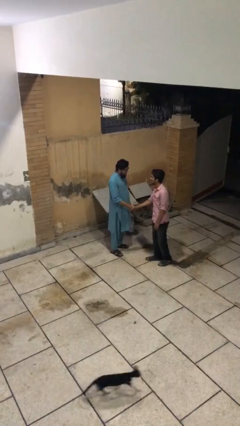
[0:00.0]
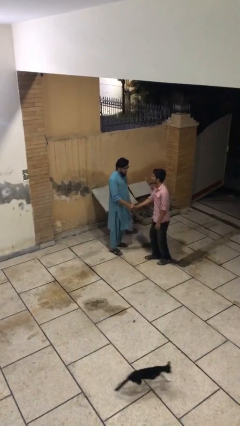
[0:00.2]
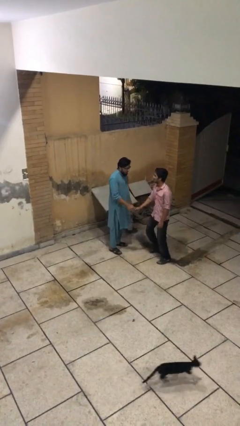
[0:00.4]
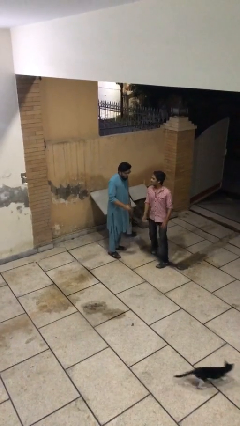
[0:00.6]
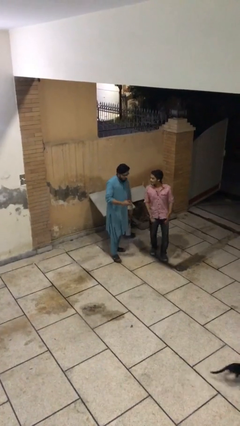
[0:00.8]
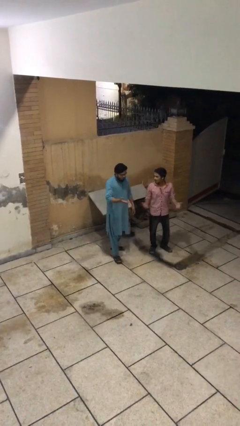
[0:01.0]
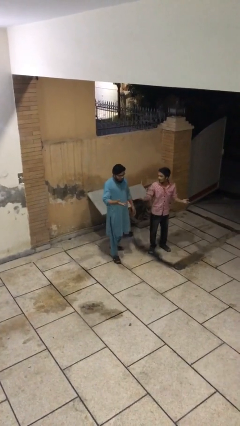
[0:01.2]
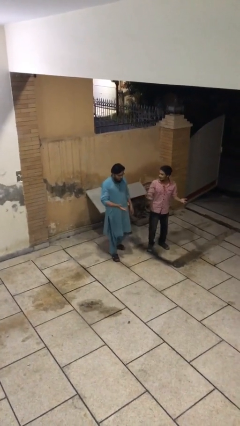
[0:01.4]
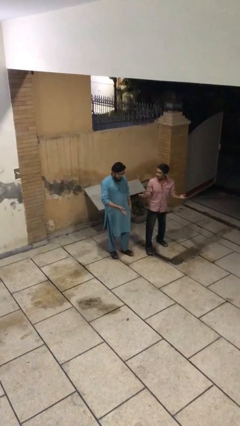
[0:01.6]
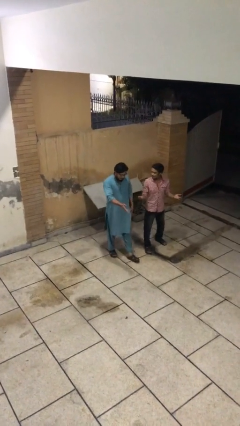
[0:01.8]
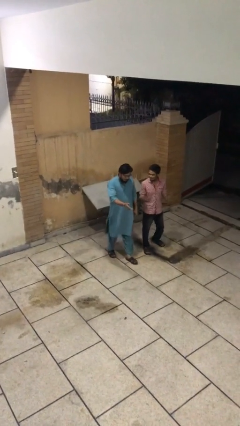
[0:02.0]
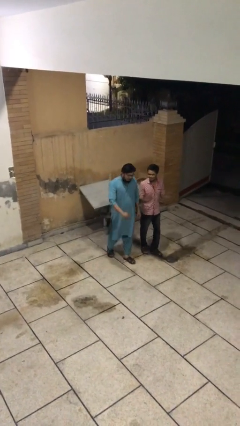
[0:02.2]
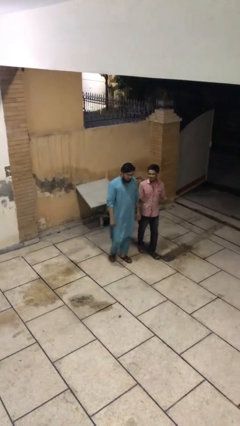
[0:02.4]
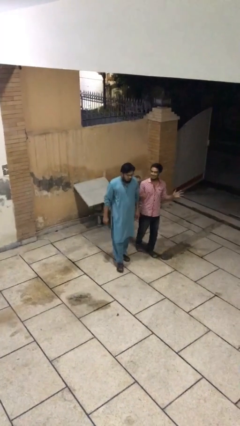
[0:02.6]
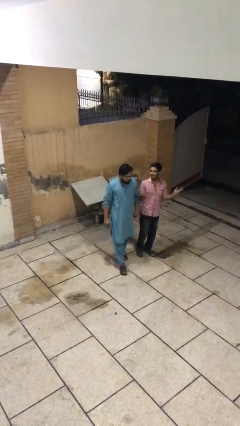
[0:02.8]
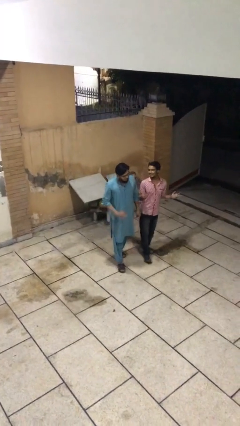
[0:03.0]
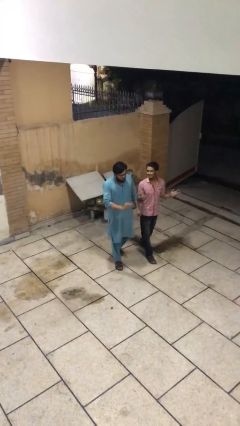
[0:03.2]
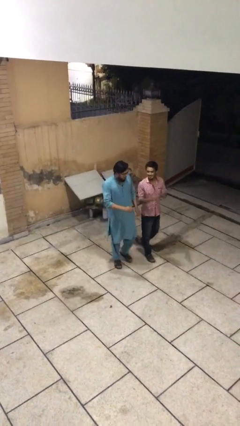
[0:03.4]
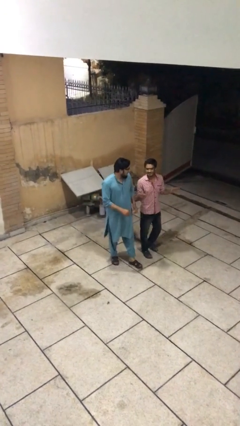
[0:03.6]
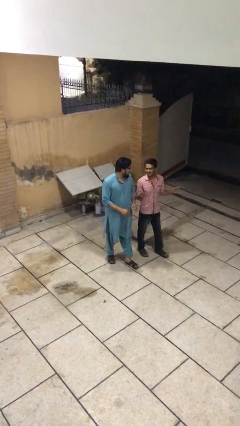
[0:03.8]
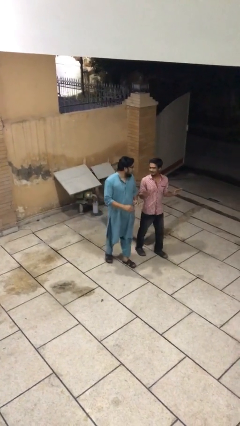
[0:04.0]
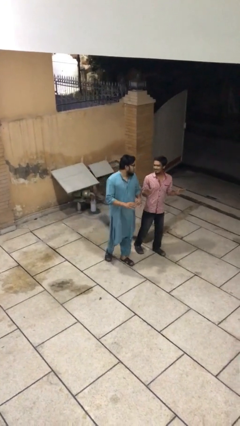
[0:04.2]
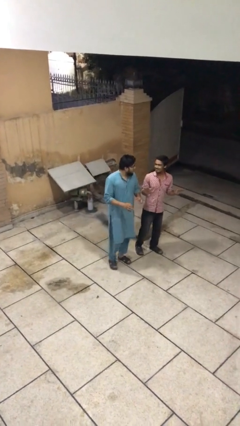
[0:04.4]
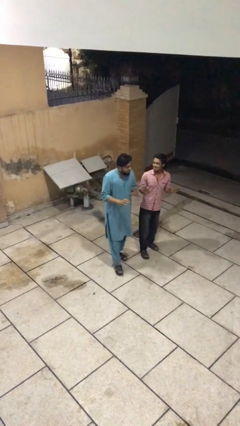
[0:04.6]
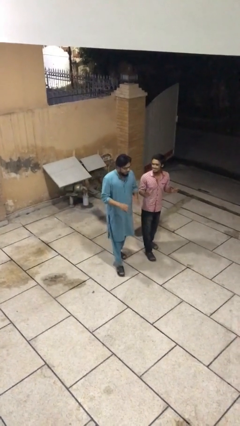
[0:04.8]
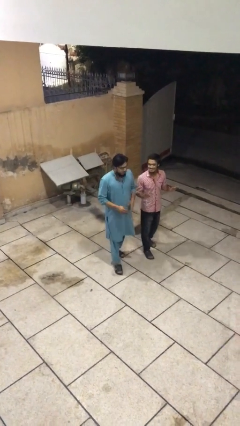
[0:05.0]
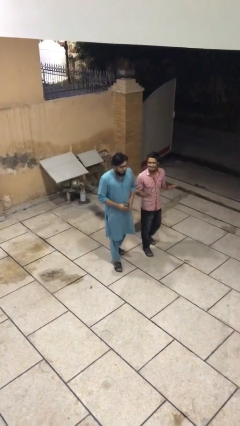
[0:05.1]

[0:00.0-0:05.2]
person talks to person

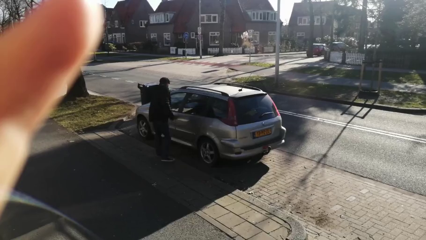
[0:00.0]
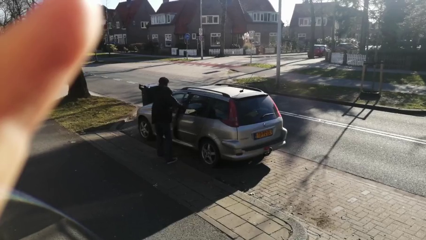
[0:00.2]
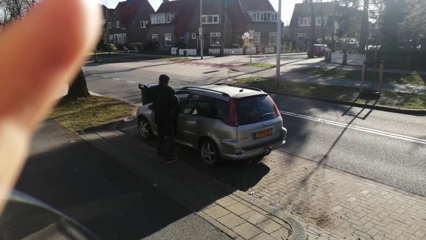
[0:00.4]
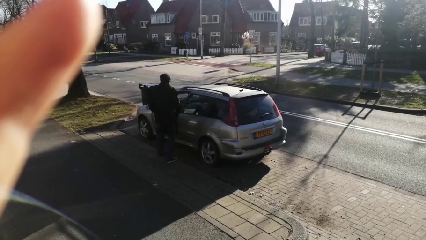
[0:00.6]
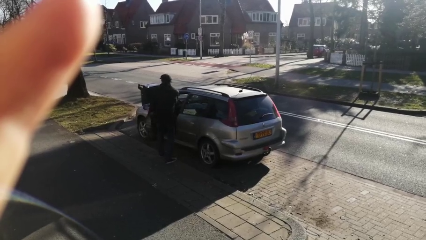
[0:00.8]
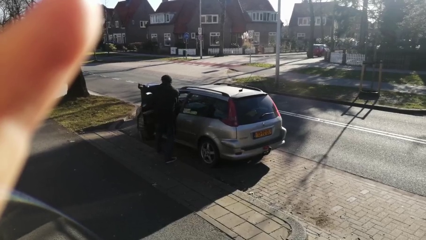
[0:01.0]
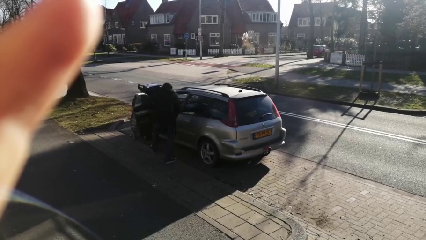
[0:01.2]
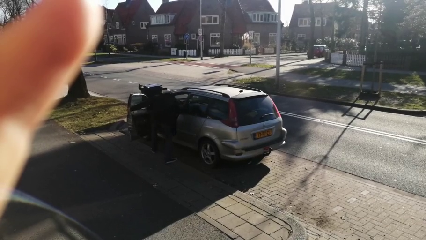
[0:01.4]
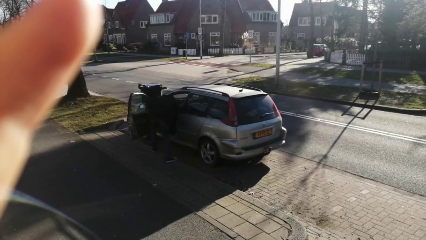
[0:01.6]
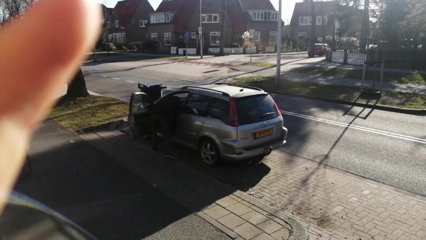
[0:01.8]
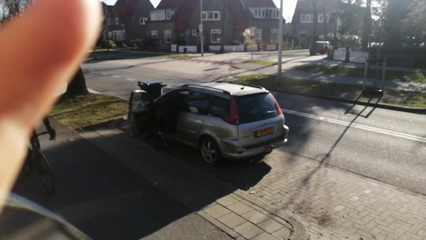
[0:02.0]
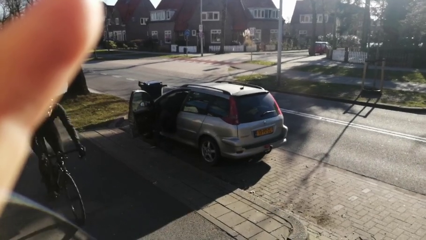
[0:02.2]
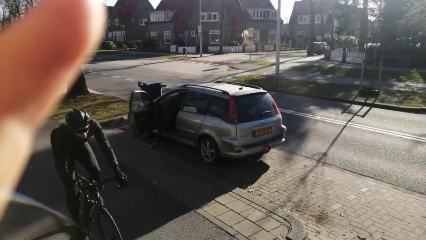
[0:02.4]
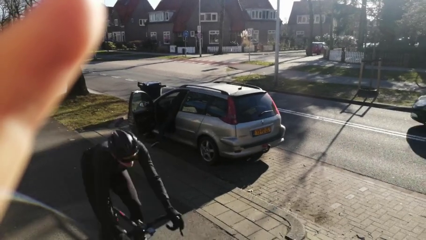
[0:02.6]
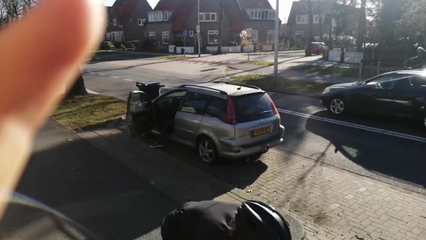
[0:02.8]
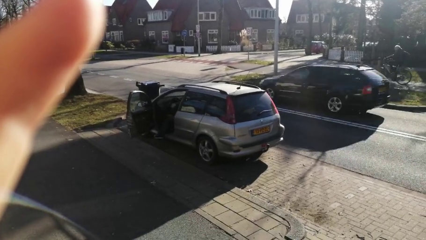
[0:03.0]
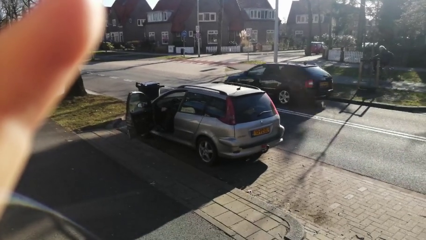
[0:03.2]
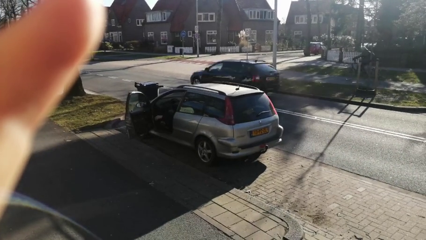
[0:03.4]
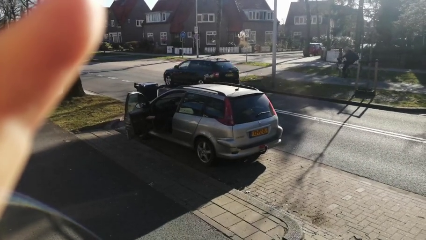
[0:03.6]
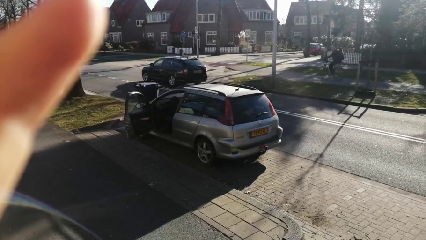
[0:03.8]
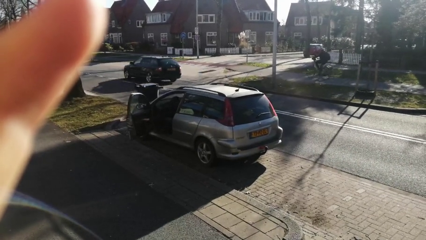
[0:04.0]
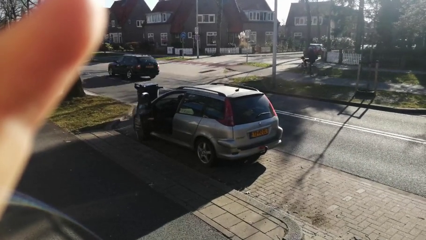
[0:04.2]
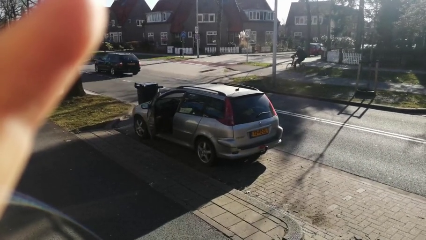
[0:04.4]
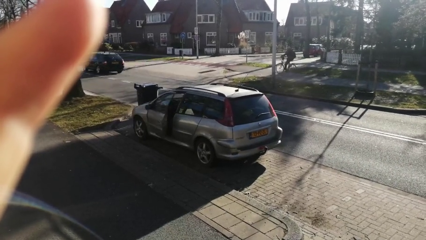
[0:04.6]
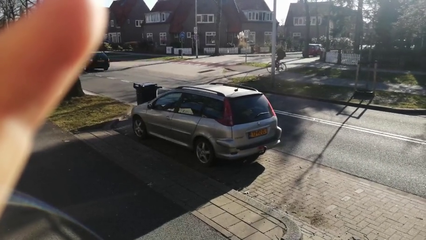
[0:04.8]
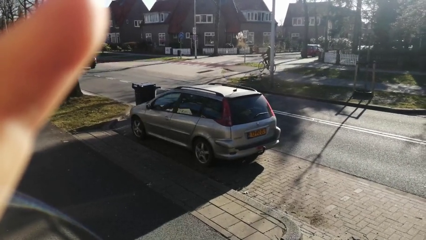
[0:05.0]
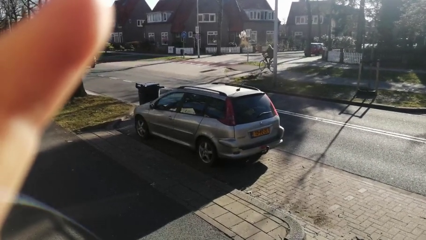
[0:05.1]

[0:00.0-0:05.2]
car picks up person

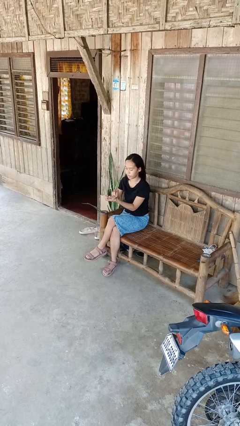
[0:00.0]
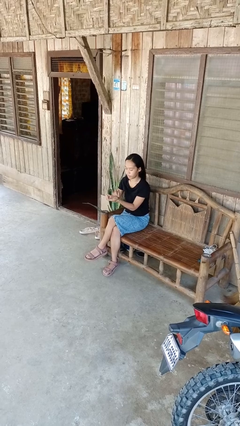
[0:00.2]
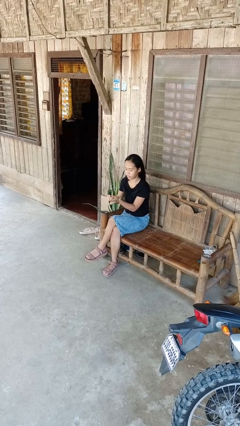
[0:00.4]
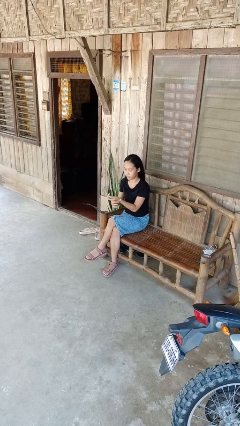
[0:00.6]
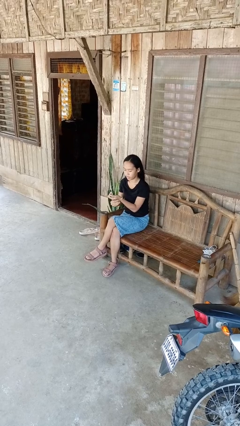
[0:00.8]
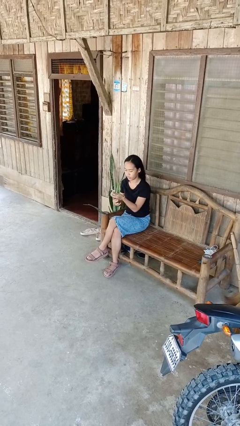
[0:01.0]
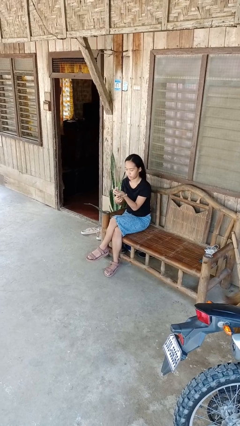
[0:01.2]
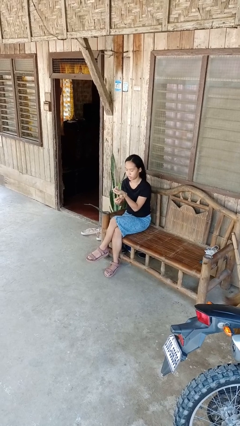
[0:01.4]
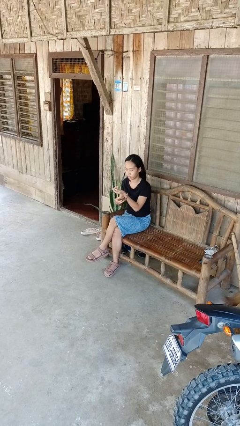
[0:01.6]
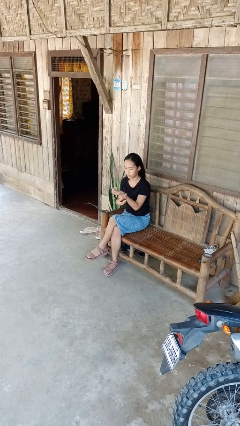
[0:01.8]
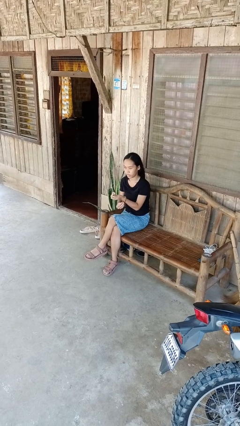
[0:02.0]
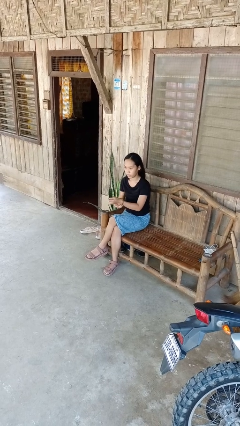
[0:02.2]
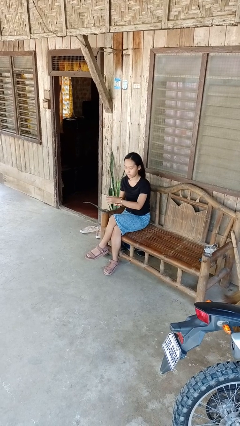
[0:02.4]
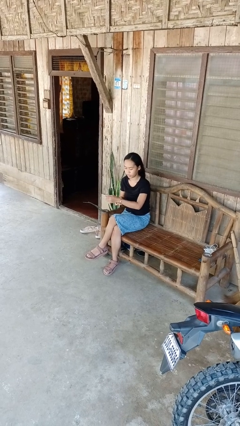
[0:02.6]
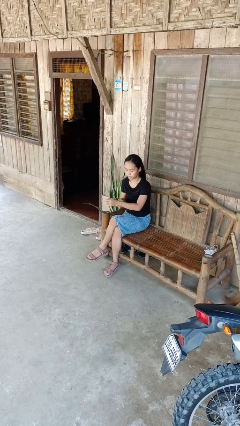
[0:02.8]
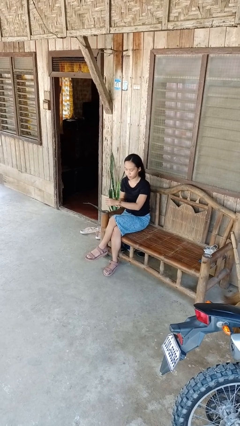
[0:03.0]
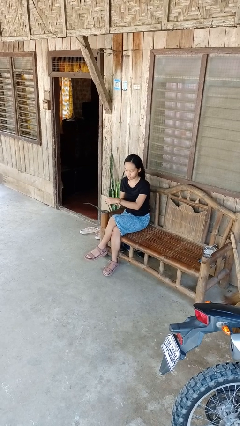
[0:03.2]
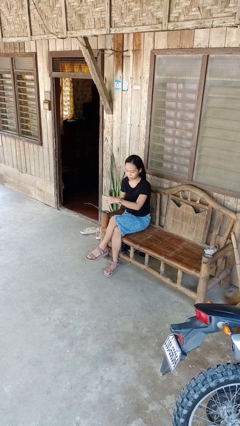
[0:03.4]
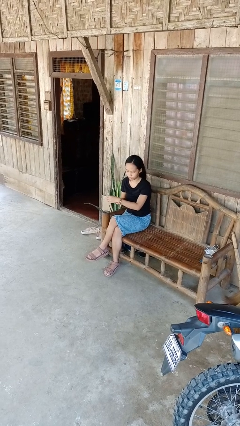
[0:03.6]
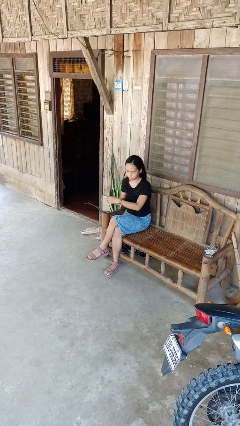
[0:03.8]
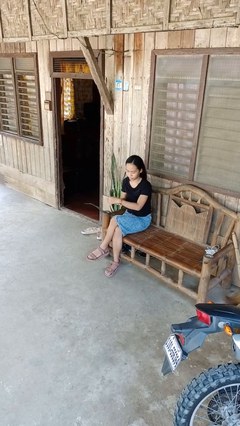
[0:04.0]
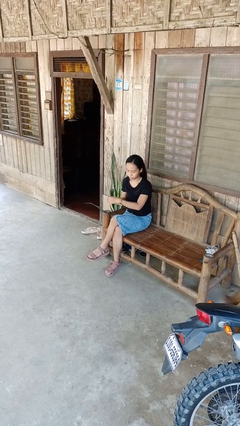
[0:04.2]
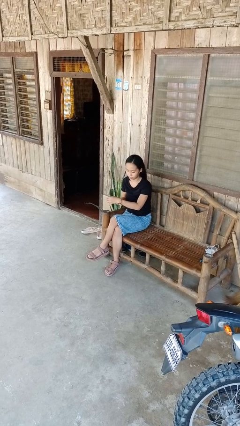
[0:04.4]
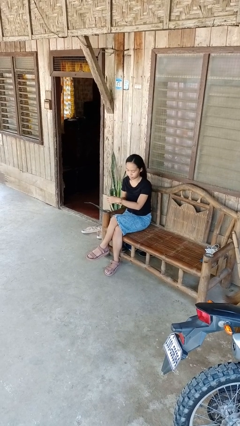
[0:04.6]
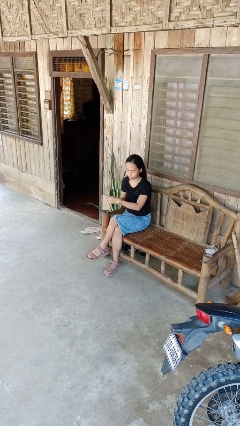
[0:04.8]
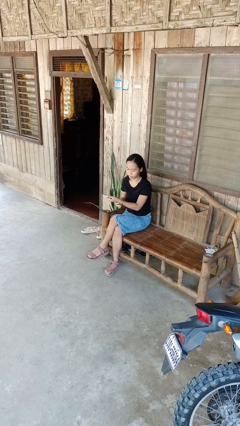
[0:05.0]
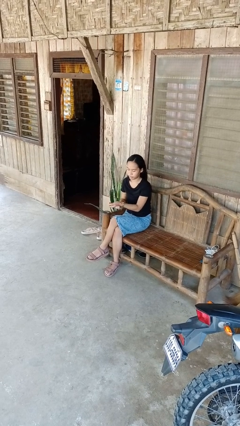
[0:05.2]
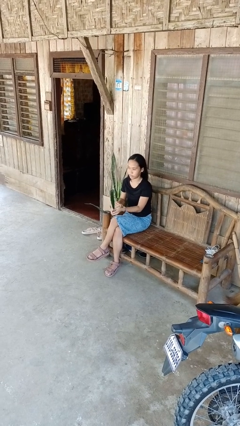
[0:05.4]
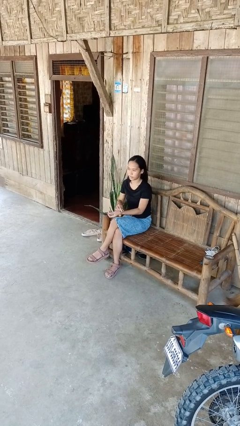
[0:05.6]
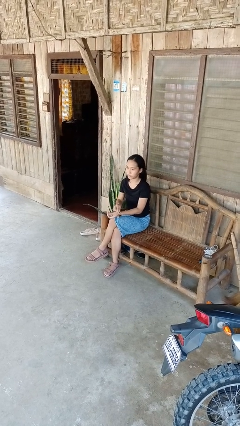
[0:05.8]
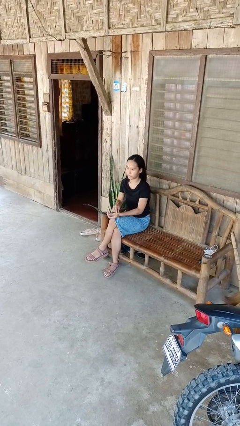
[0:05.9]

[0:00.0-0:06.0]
person puts on wristwatch

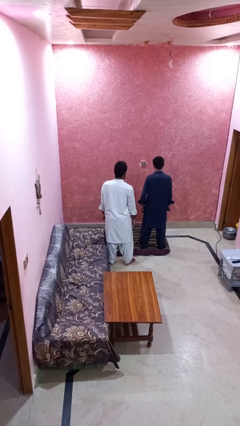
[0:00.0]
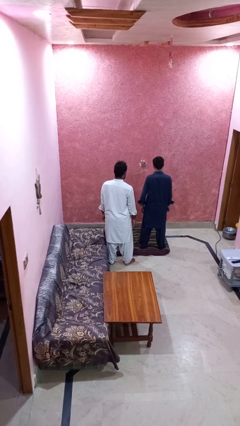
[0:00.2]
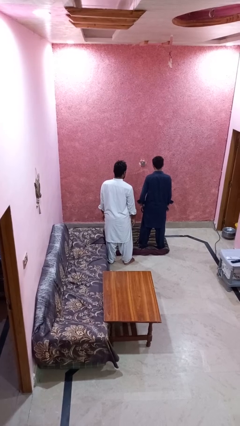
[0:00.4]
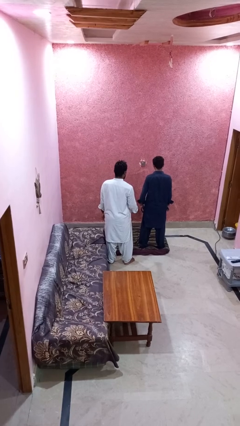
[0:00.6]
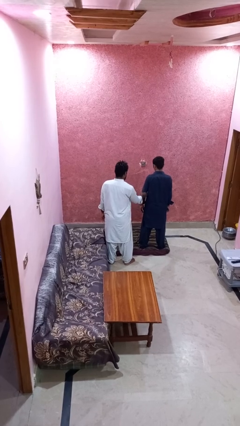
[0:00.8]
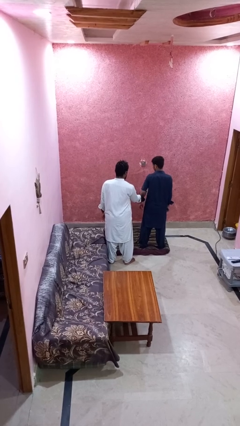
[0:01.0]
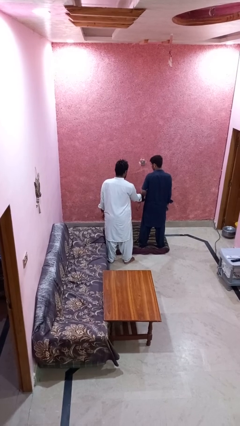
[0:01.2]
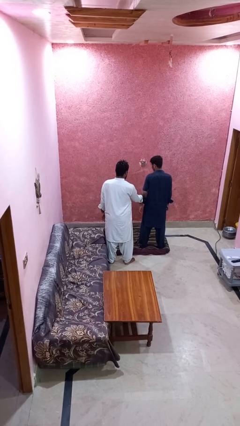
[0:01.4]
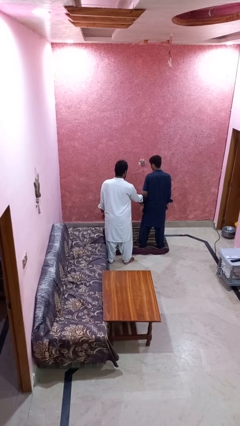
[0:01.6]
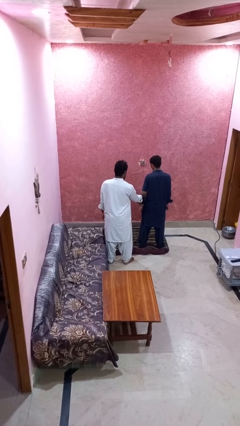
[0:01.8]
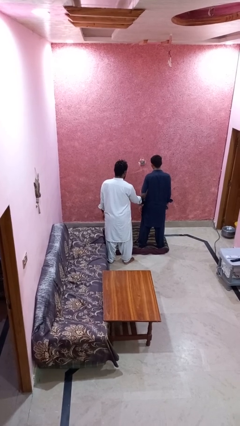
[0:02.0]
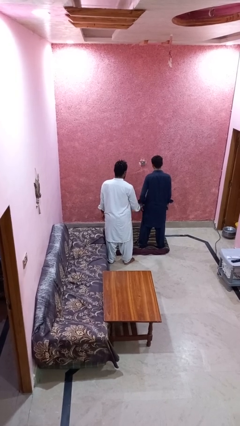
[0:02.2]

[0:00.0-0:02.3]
person grabs person by bicep
